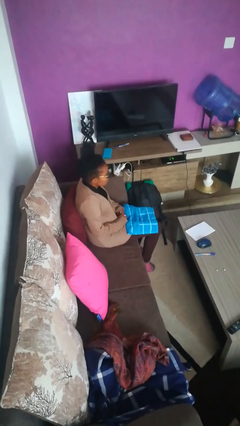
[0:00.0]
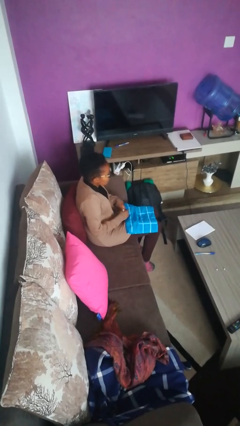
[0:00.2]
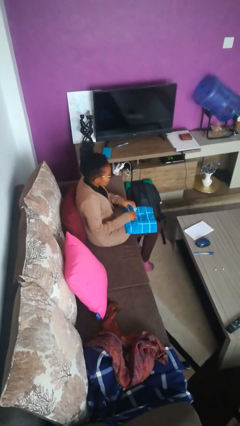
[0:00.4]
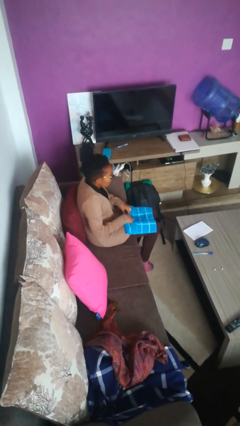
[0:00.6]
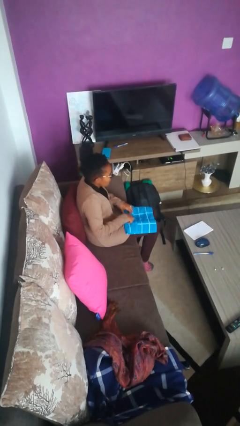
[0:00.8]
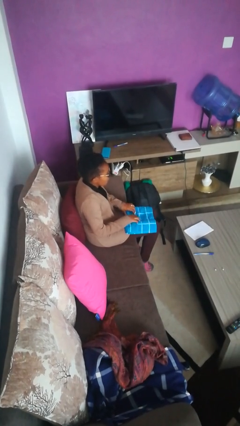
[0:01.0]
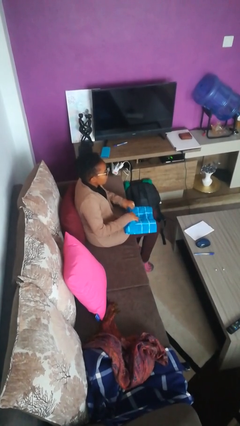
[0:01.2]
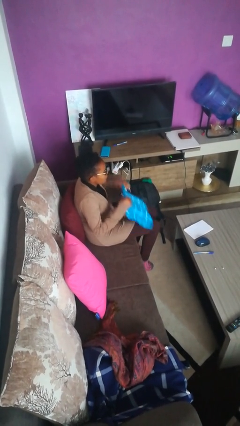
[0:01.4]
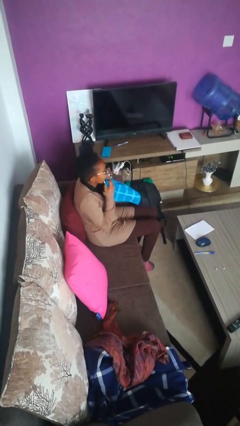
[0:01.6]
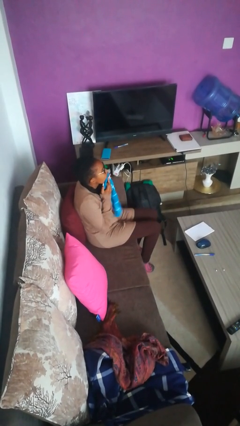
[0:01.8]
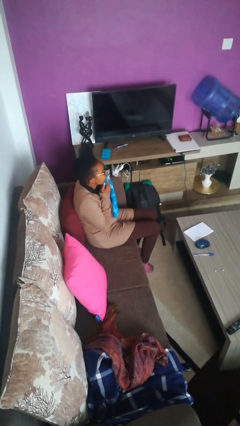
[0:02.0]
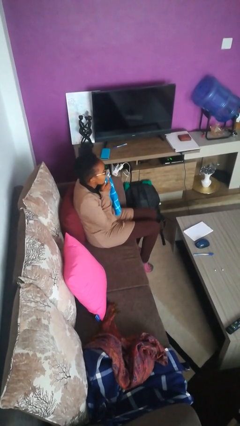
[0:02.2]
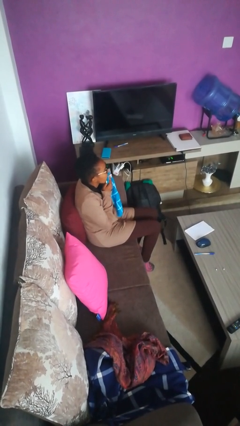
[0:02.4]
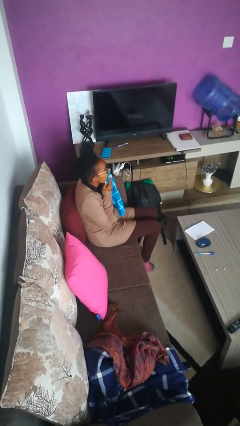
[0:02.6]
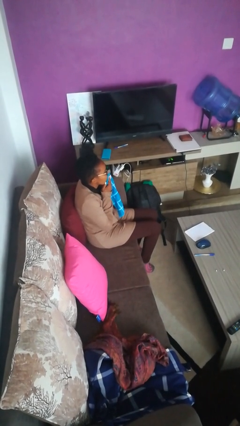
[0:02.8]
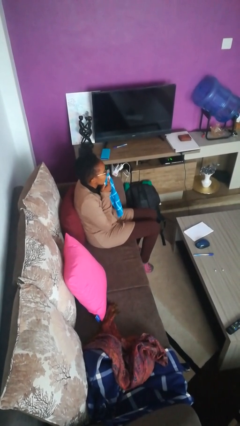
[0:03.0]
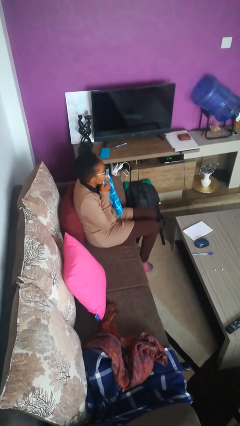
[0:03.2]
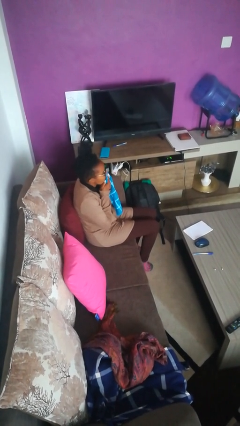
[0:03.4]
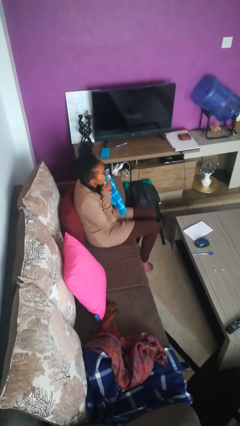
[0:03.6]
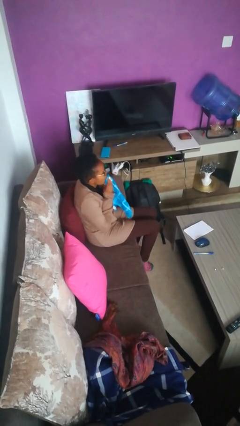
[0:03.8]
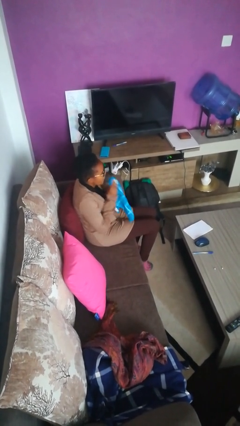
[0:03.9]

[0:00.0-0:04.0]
person wipes mouth with napkin

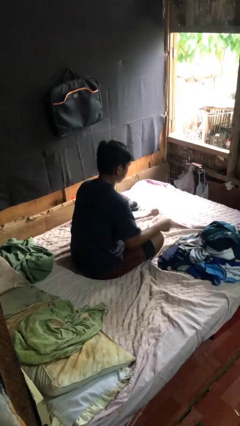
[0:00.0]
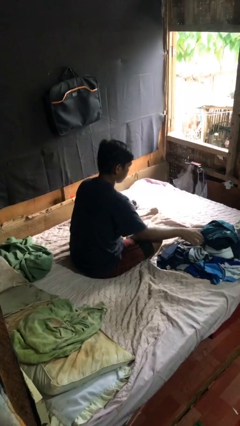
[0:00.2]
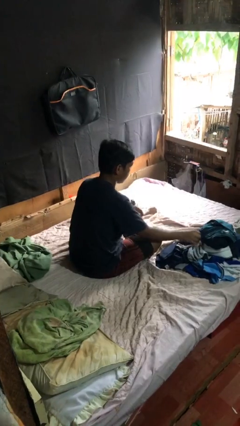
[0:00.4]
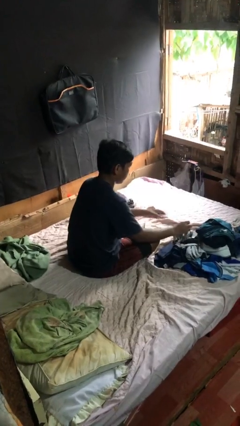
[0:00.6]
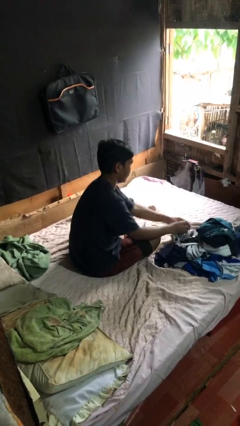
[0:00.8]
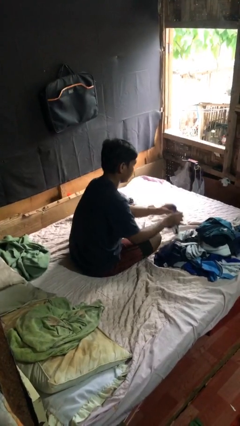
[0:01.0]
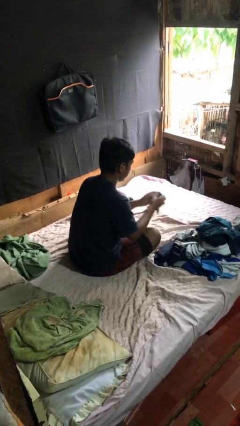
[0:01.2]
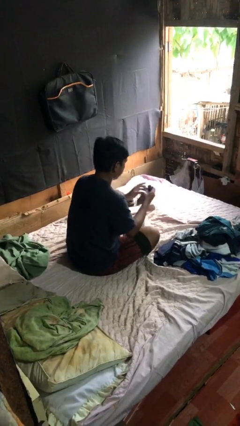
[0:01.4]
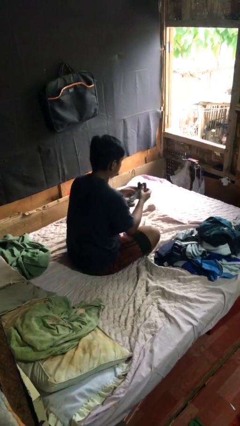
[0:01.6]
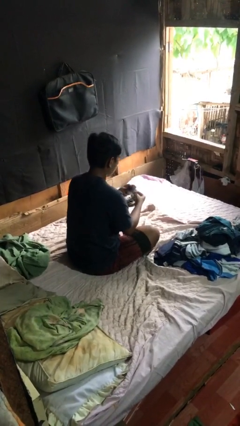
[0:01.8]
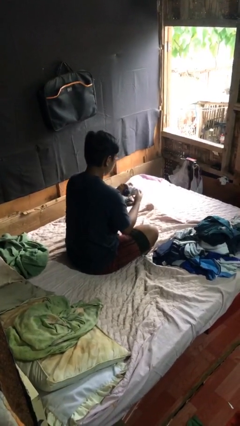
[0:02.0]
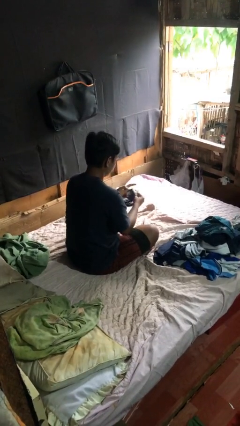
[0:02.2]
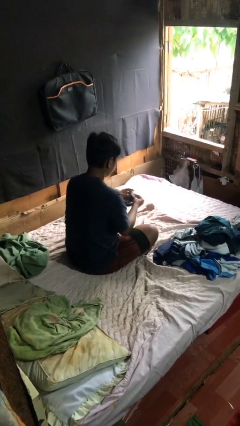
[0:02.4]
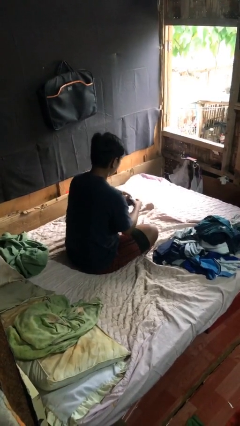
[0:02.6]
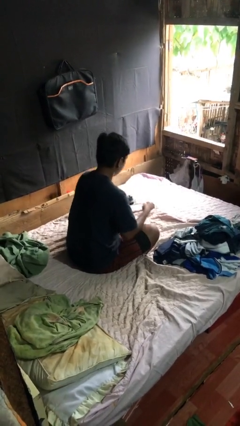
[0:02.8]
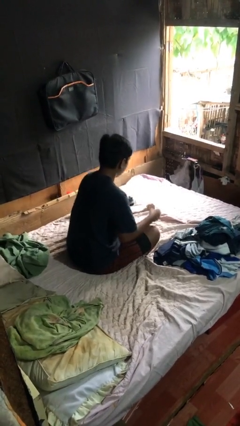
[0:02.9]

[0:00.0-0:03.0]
person folds socks

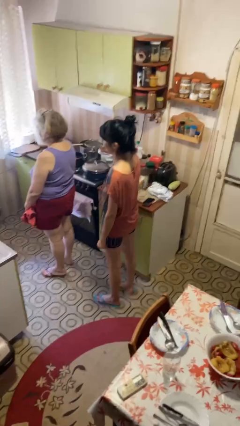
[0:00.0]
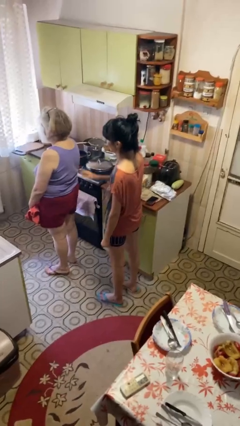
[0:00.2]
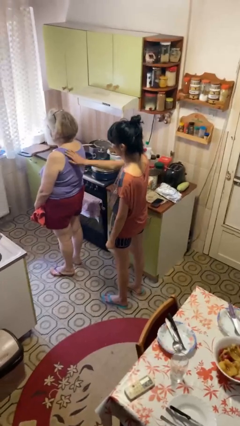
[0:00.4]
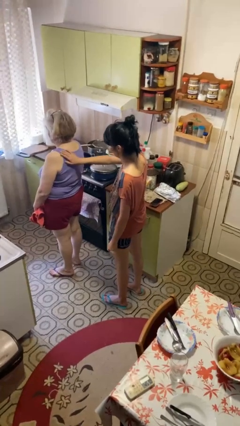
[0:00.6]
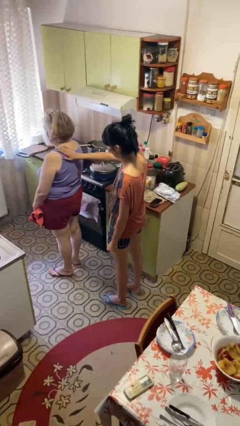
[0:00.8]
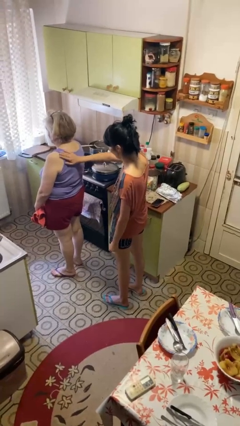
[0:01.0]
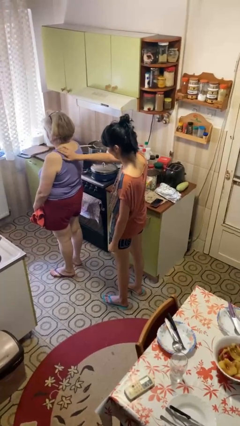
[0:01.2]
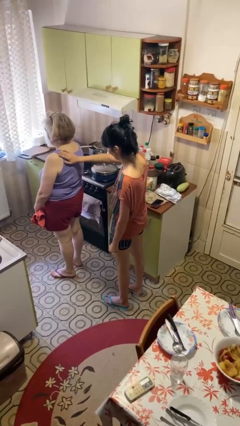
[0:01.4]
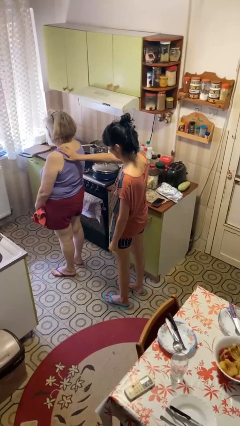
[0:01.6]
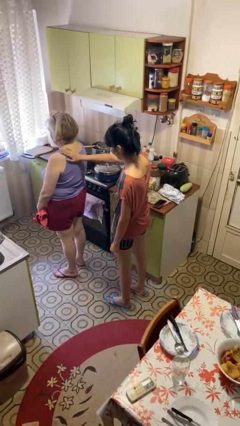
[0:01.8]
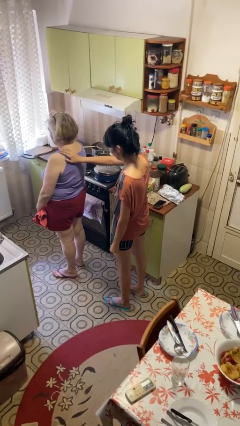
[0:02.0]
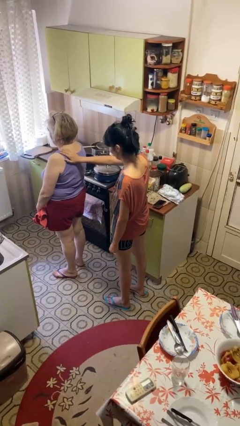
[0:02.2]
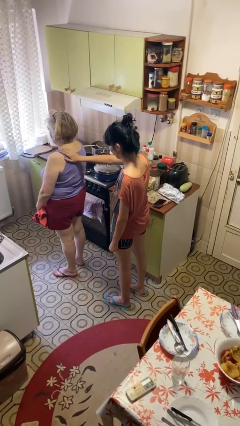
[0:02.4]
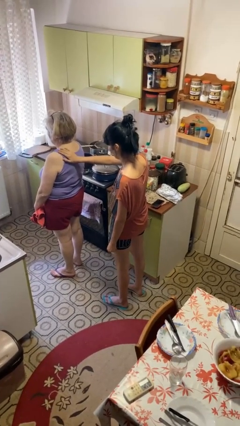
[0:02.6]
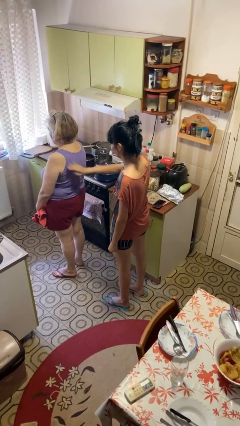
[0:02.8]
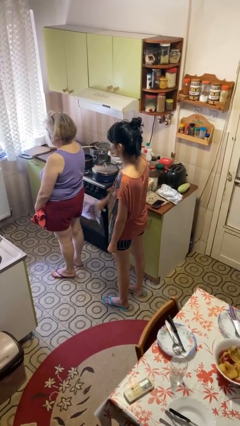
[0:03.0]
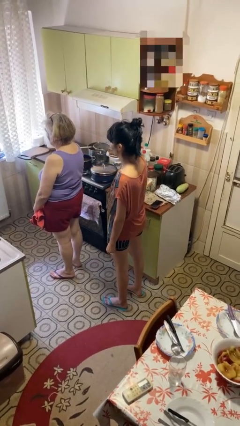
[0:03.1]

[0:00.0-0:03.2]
person touches back of person

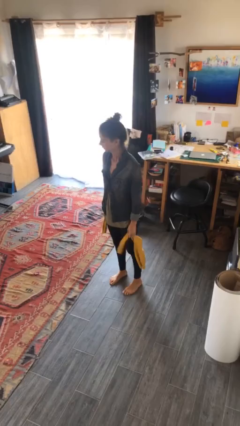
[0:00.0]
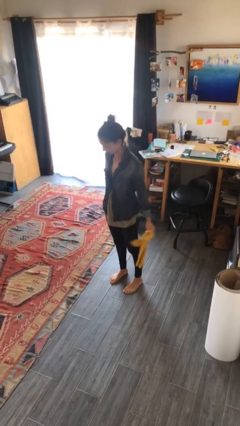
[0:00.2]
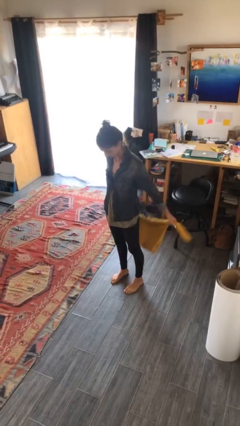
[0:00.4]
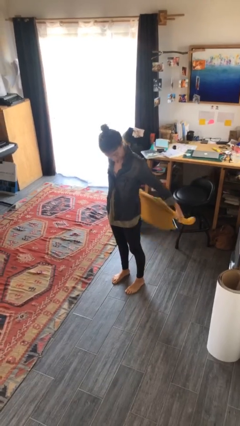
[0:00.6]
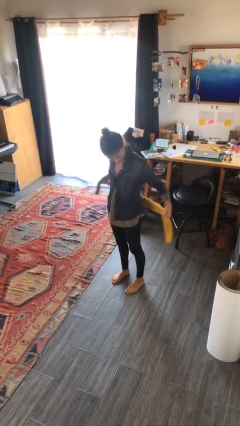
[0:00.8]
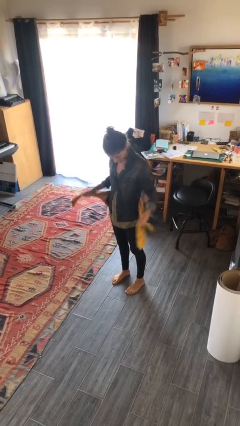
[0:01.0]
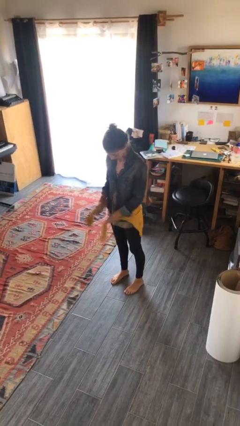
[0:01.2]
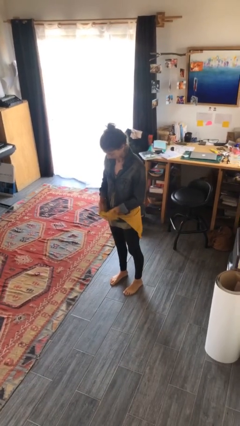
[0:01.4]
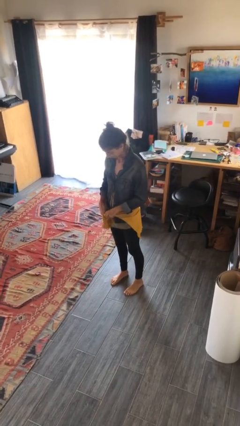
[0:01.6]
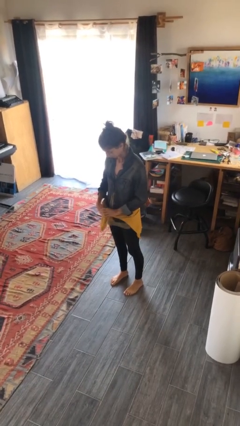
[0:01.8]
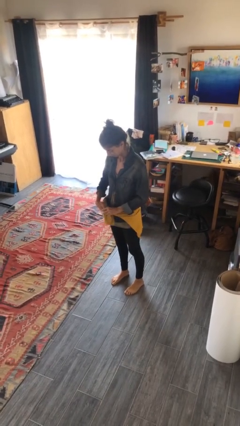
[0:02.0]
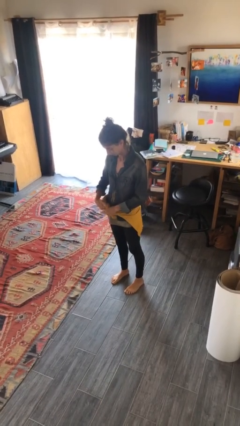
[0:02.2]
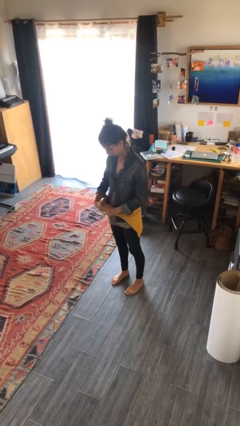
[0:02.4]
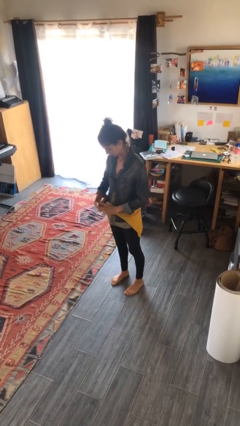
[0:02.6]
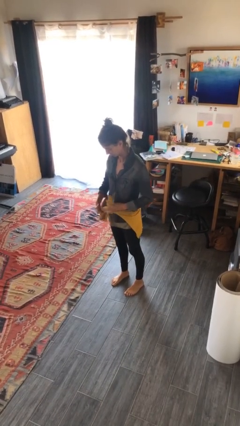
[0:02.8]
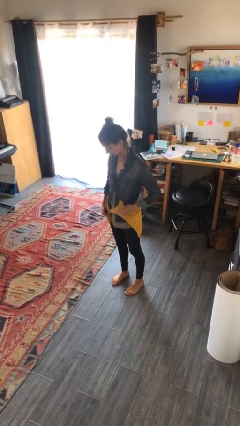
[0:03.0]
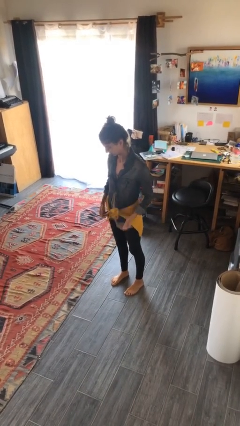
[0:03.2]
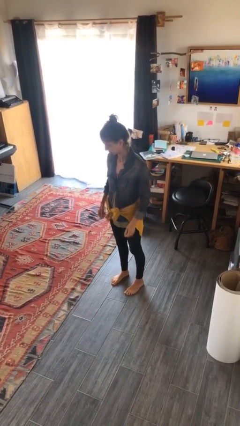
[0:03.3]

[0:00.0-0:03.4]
person ties jacket around waist

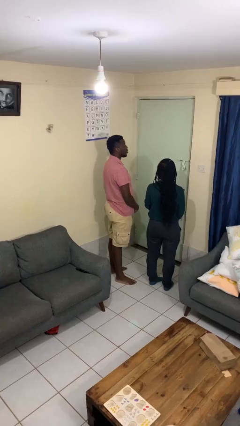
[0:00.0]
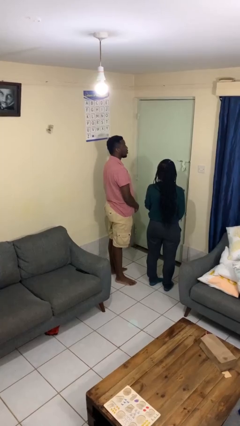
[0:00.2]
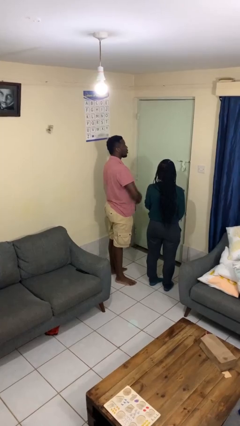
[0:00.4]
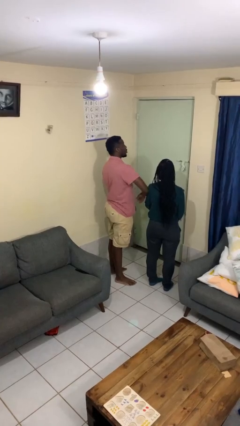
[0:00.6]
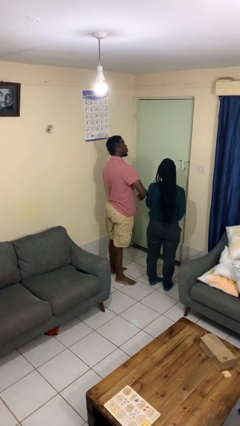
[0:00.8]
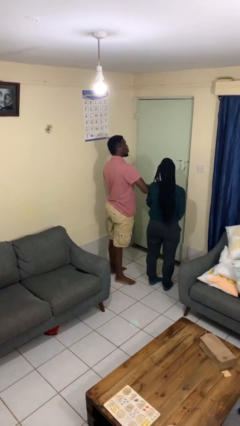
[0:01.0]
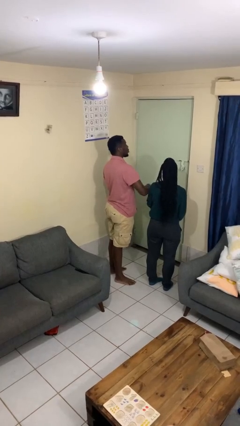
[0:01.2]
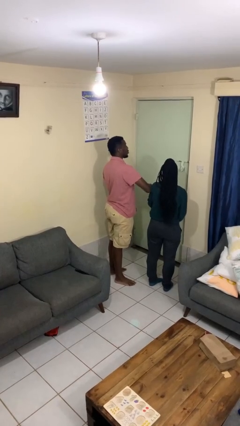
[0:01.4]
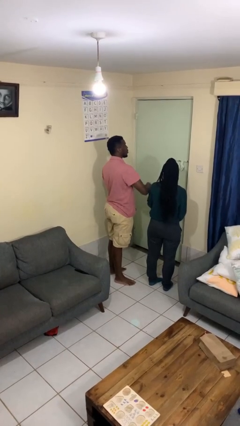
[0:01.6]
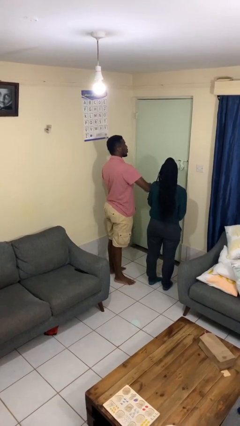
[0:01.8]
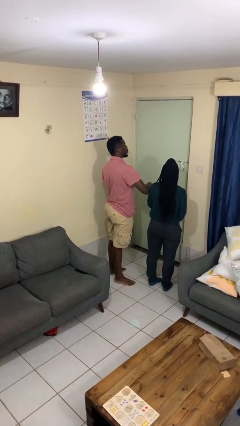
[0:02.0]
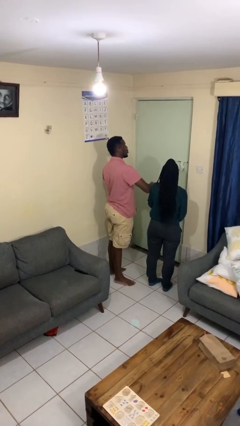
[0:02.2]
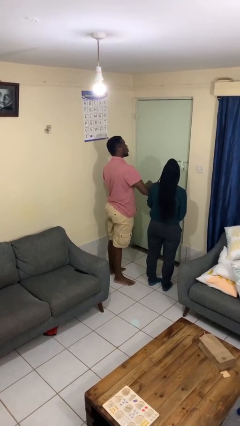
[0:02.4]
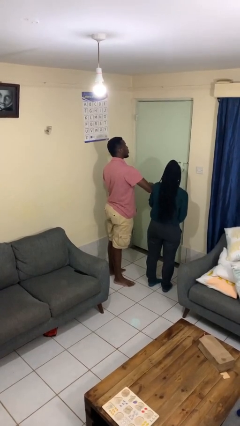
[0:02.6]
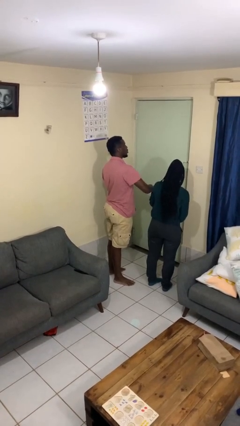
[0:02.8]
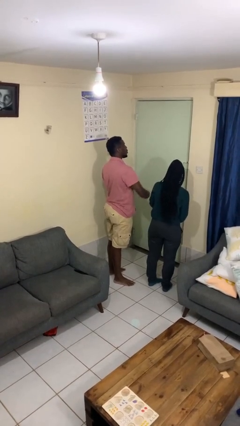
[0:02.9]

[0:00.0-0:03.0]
person nudges person with elbow

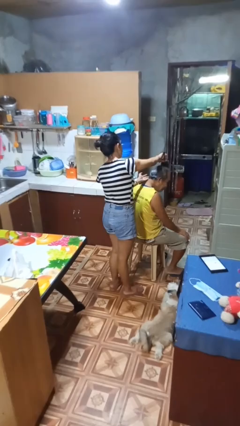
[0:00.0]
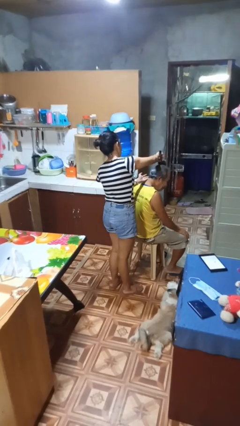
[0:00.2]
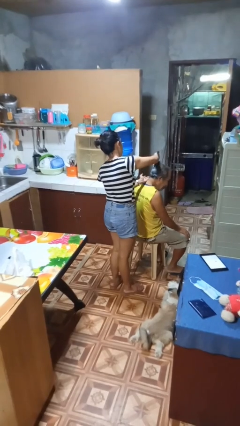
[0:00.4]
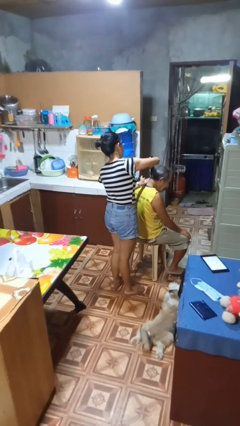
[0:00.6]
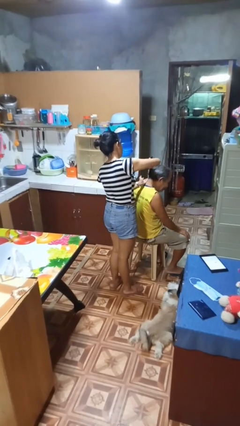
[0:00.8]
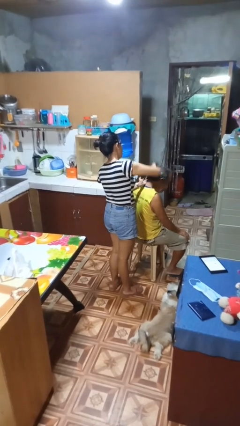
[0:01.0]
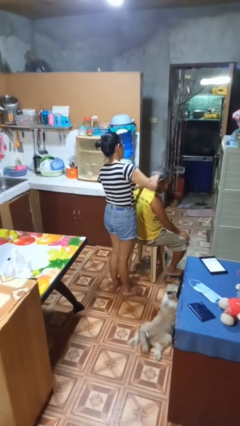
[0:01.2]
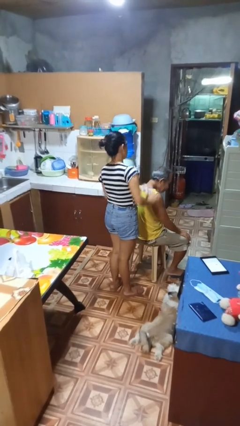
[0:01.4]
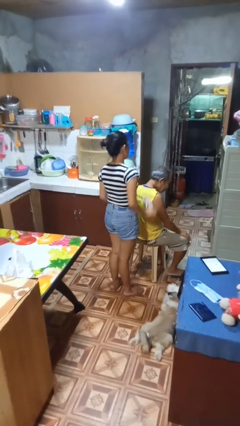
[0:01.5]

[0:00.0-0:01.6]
person brushes hair of person
